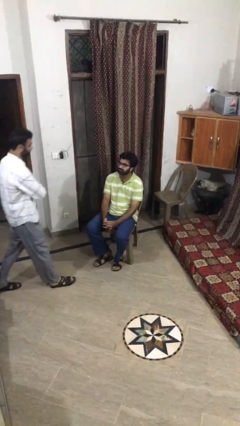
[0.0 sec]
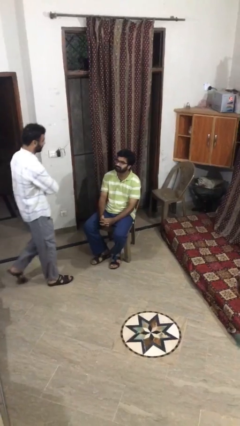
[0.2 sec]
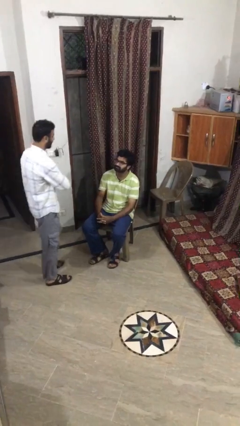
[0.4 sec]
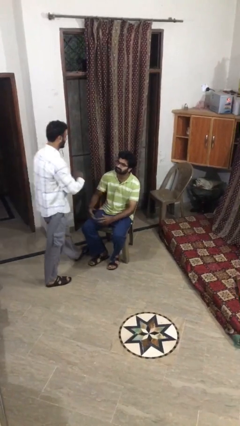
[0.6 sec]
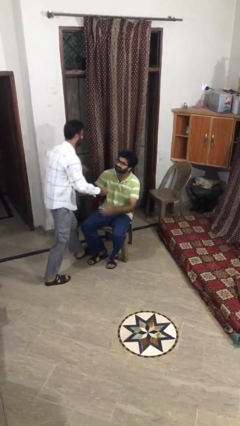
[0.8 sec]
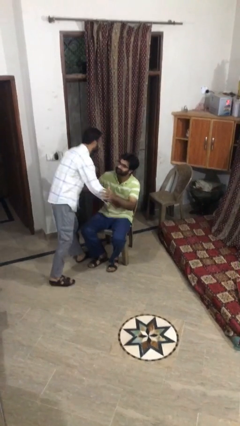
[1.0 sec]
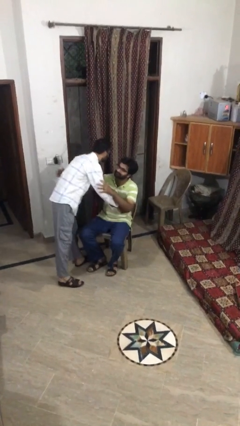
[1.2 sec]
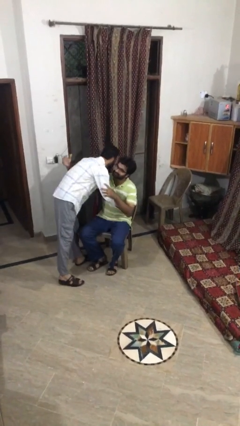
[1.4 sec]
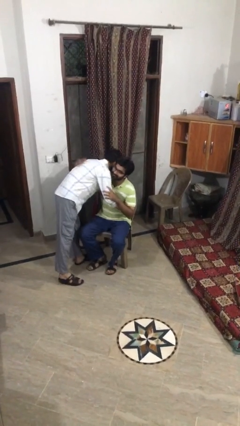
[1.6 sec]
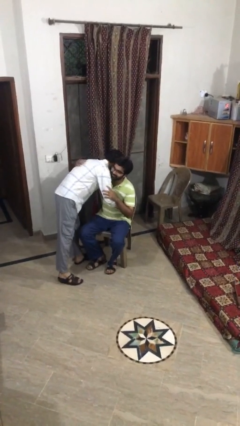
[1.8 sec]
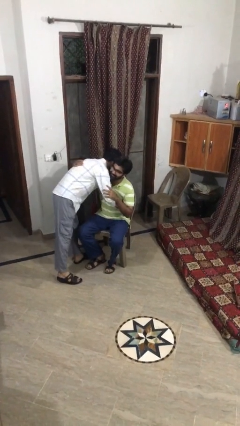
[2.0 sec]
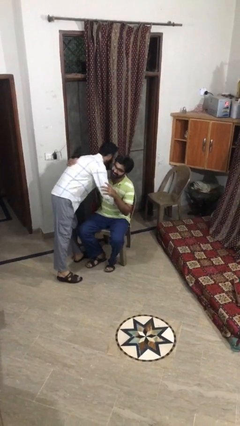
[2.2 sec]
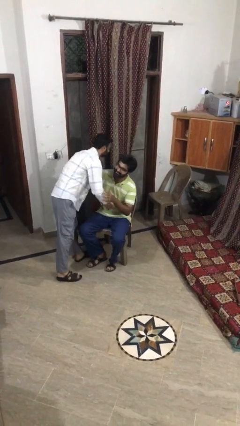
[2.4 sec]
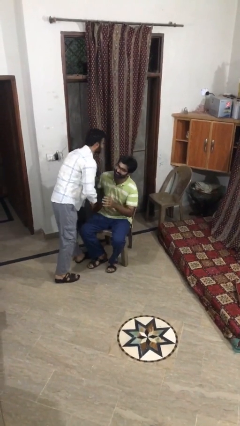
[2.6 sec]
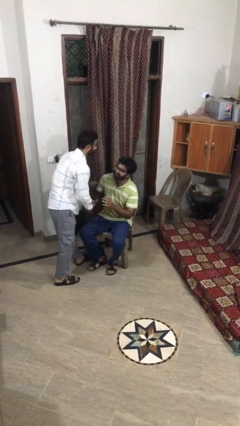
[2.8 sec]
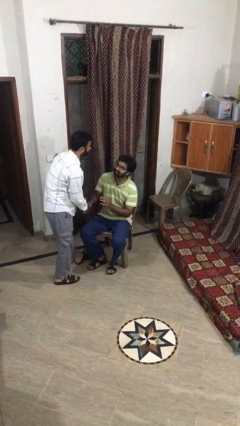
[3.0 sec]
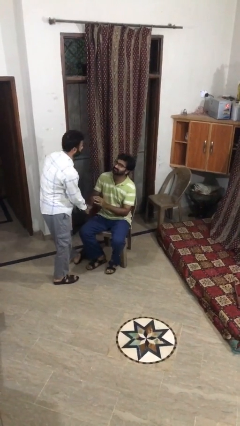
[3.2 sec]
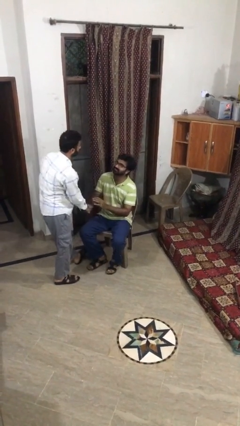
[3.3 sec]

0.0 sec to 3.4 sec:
person embraces person

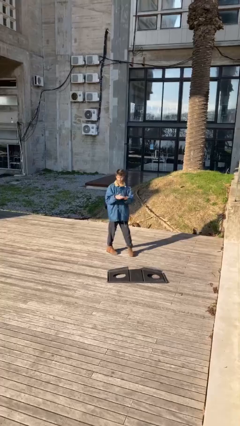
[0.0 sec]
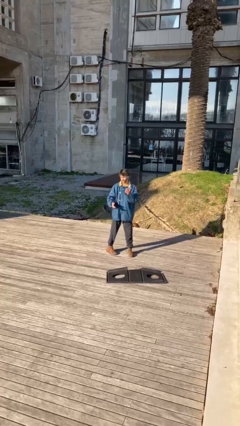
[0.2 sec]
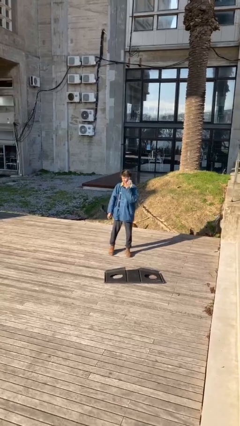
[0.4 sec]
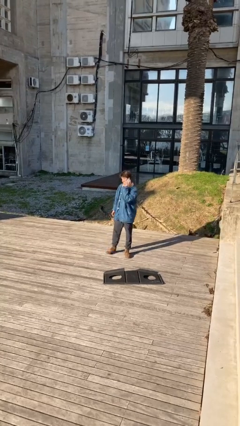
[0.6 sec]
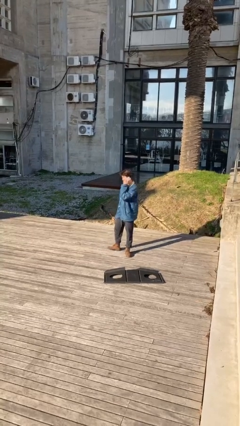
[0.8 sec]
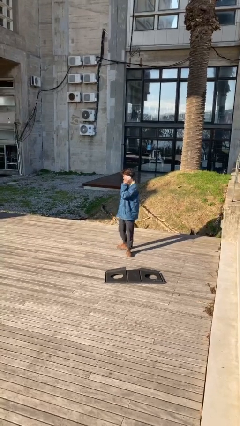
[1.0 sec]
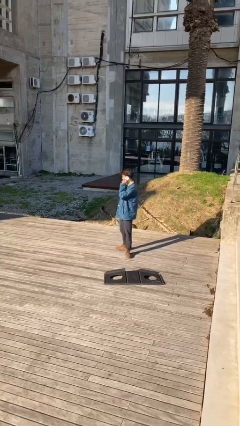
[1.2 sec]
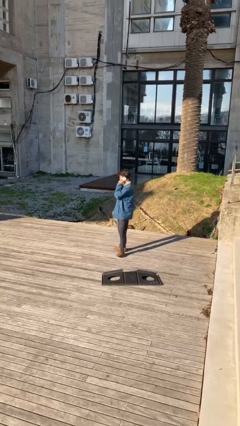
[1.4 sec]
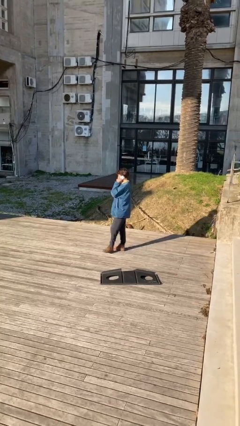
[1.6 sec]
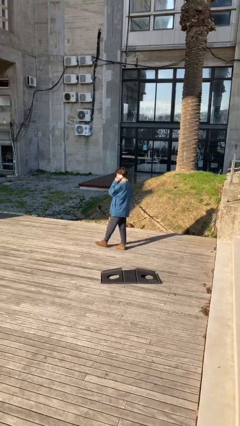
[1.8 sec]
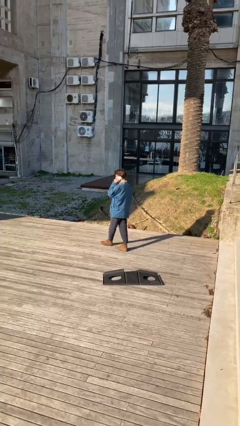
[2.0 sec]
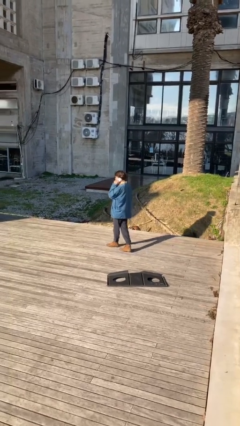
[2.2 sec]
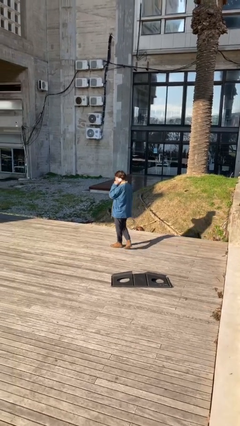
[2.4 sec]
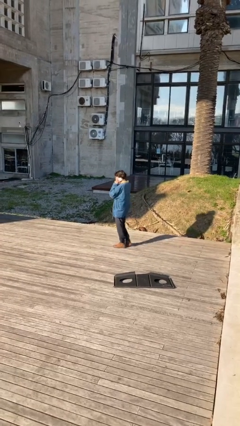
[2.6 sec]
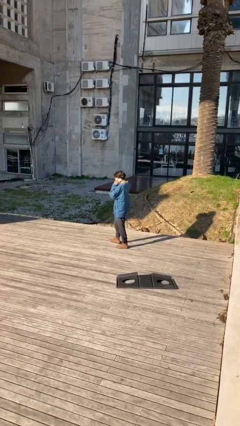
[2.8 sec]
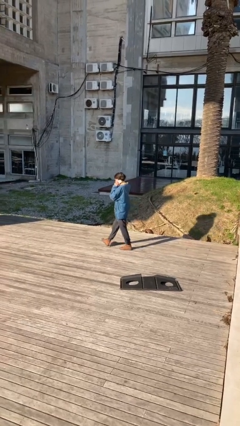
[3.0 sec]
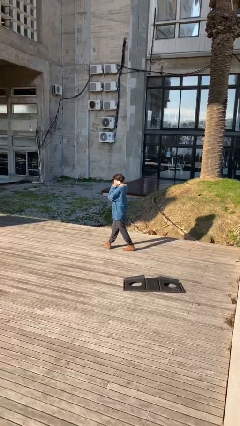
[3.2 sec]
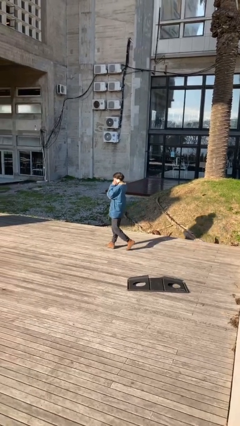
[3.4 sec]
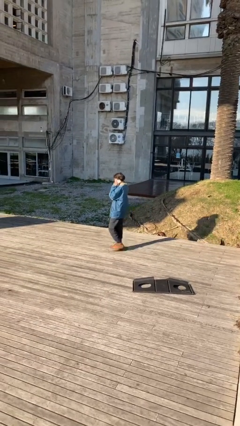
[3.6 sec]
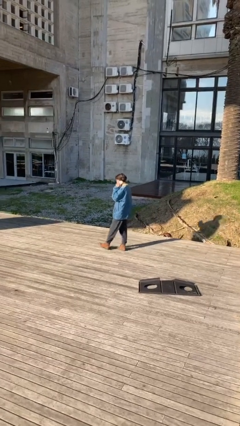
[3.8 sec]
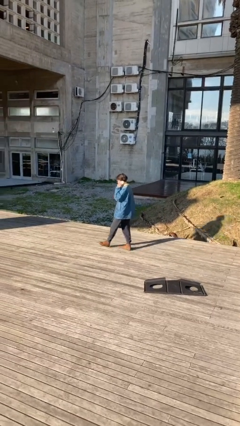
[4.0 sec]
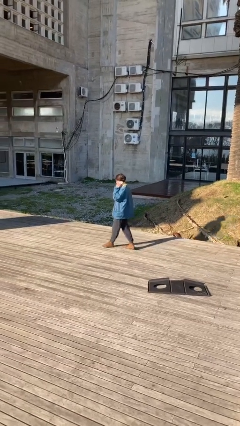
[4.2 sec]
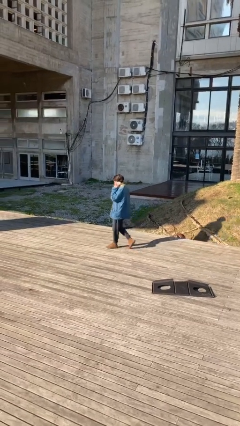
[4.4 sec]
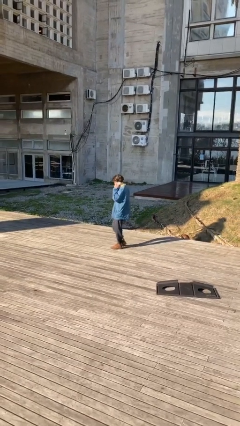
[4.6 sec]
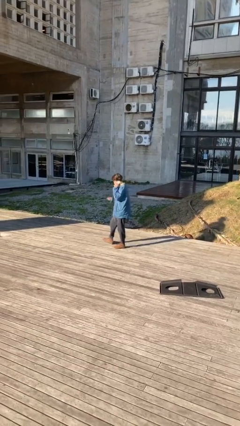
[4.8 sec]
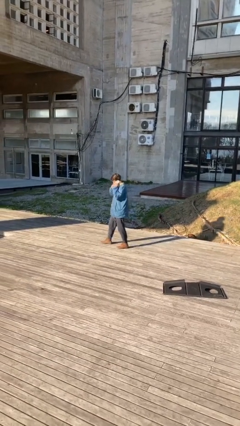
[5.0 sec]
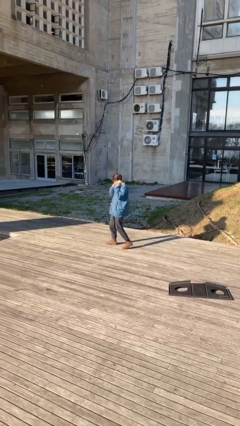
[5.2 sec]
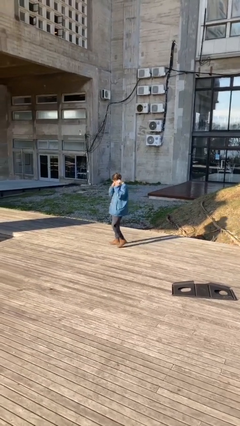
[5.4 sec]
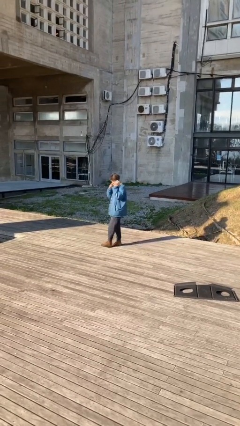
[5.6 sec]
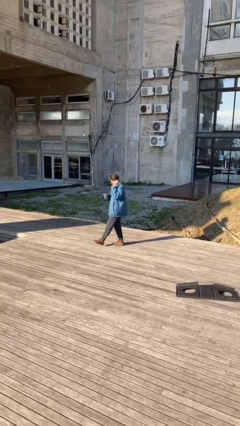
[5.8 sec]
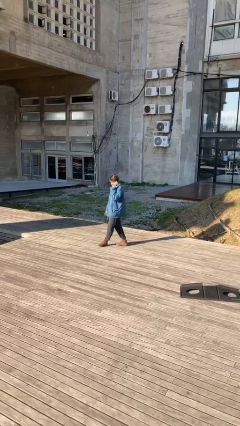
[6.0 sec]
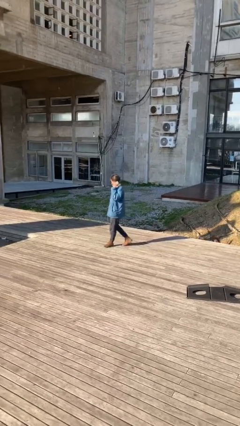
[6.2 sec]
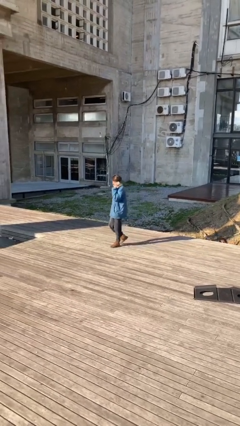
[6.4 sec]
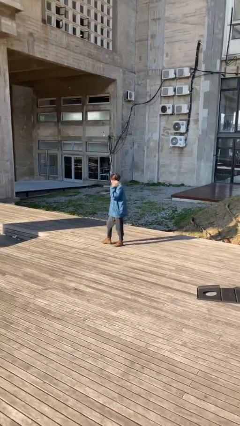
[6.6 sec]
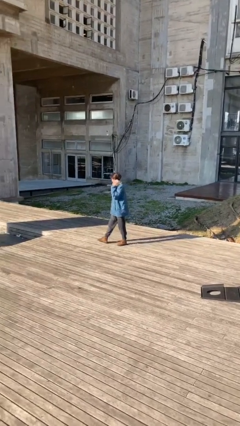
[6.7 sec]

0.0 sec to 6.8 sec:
person talks on phone

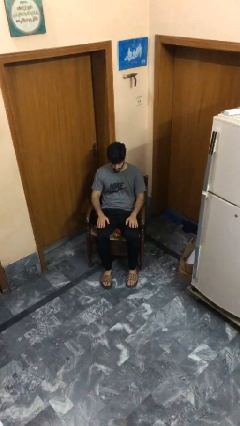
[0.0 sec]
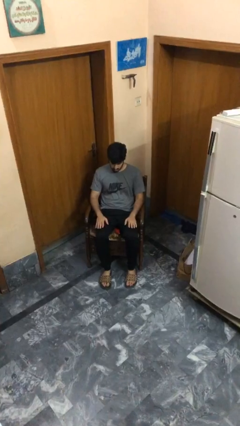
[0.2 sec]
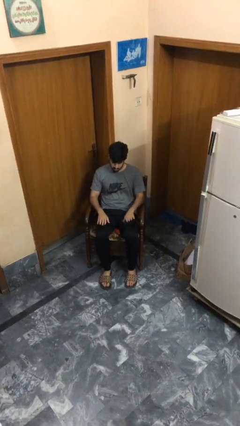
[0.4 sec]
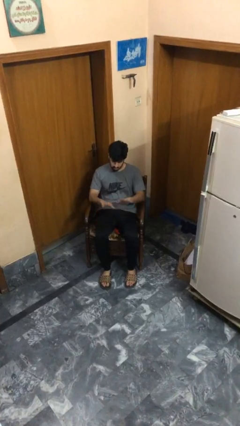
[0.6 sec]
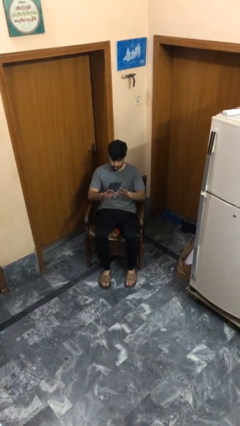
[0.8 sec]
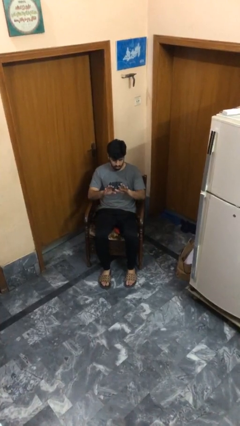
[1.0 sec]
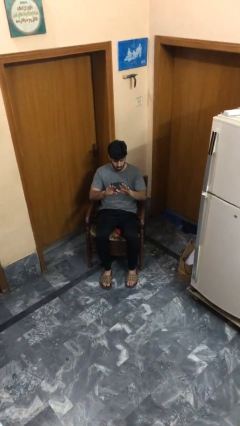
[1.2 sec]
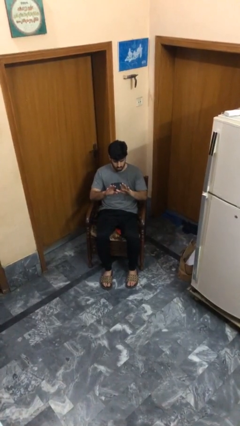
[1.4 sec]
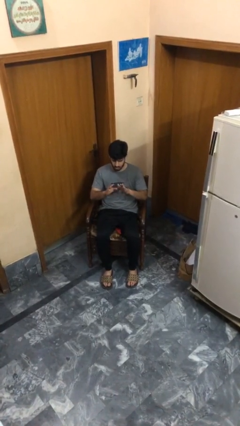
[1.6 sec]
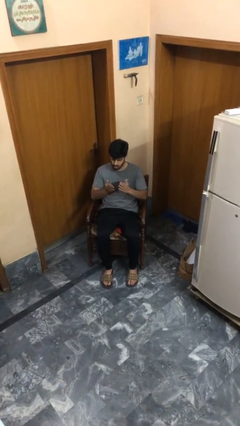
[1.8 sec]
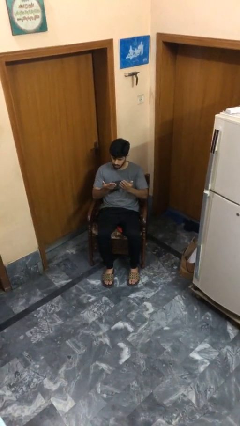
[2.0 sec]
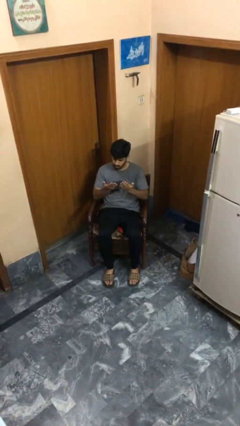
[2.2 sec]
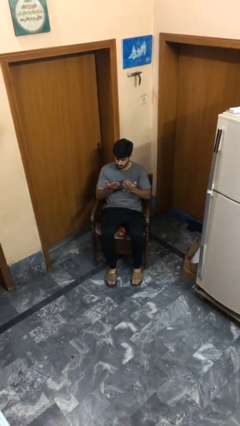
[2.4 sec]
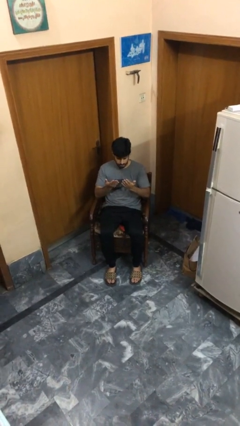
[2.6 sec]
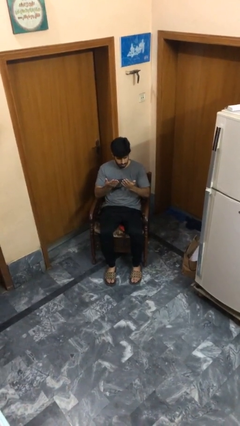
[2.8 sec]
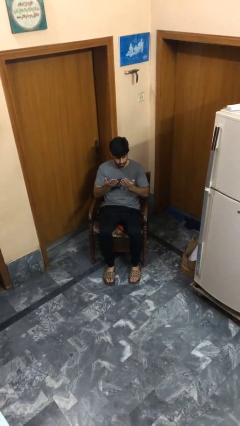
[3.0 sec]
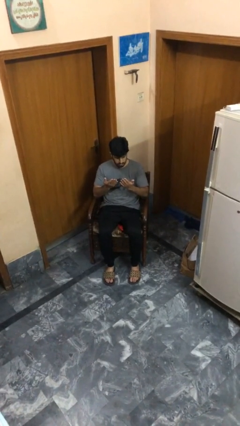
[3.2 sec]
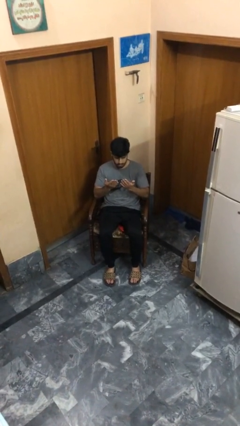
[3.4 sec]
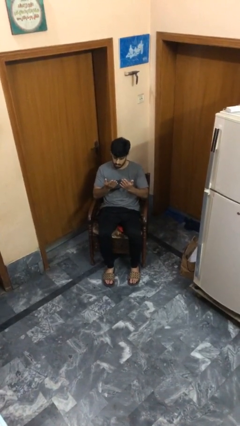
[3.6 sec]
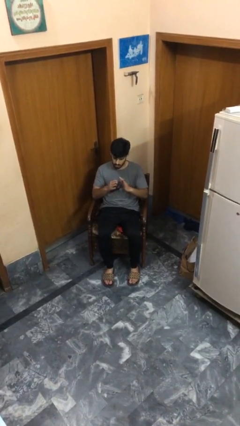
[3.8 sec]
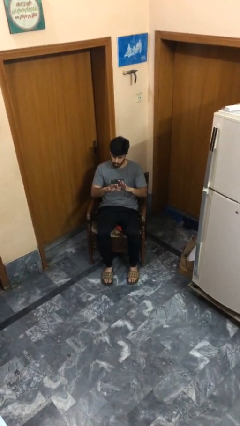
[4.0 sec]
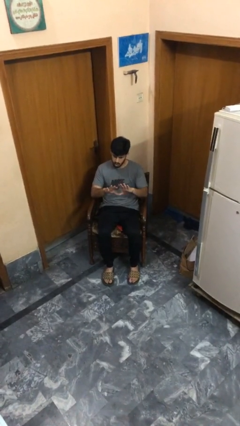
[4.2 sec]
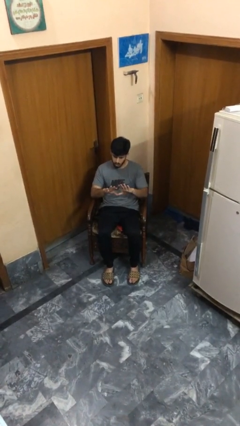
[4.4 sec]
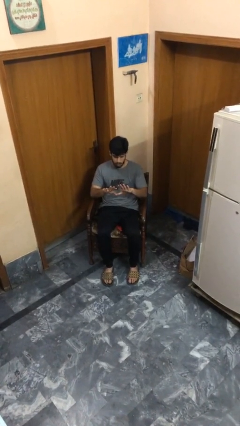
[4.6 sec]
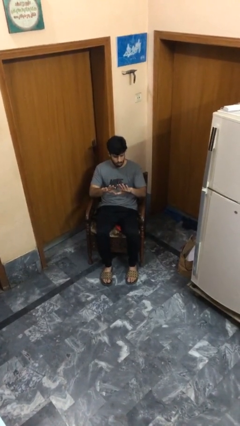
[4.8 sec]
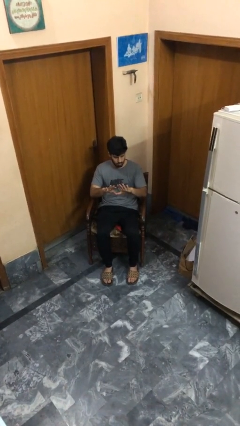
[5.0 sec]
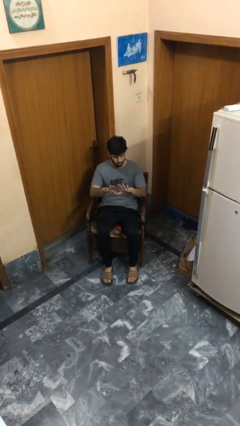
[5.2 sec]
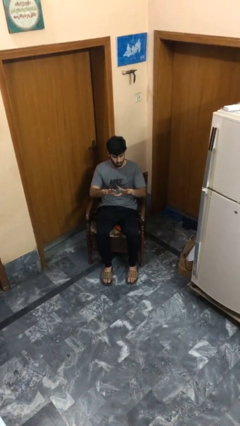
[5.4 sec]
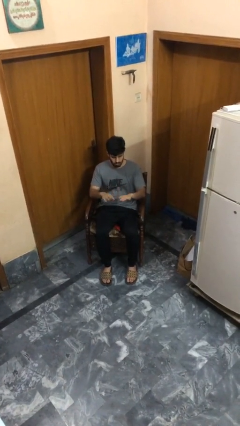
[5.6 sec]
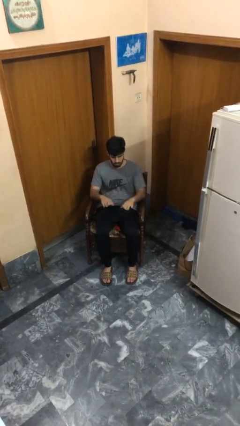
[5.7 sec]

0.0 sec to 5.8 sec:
person looks at hands in lap

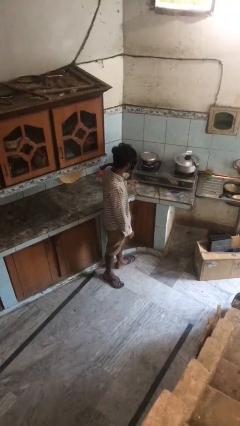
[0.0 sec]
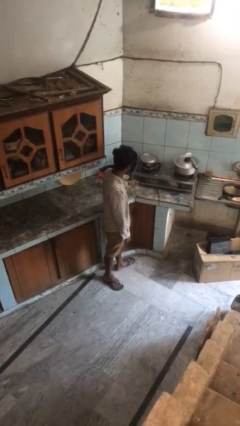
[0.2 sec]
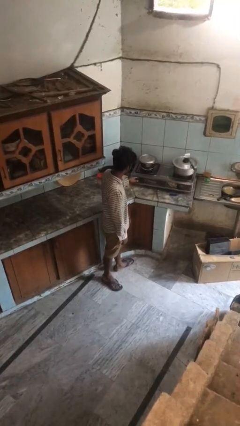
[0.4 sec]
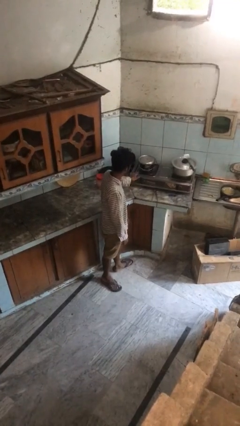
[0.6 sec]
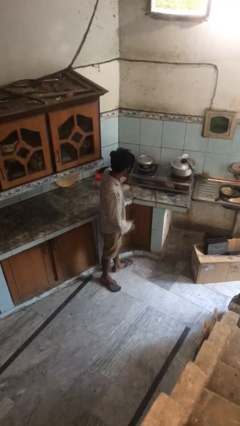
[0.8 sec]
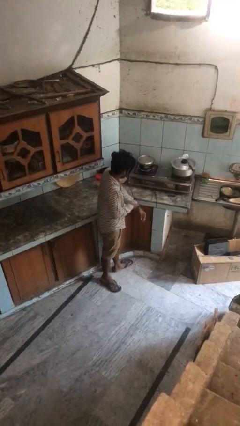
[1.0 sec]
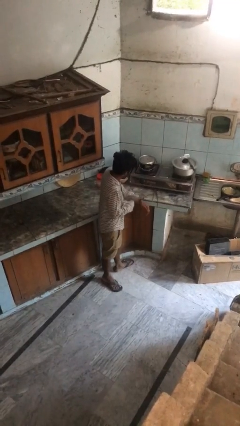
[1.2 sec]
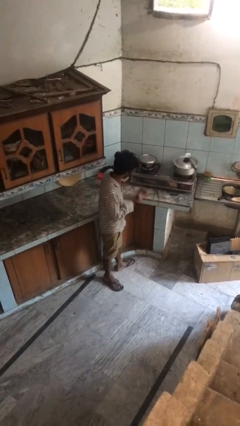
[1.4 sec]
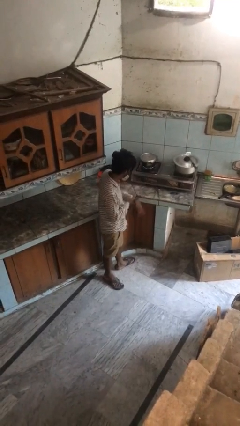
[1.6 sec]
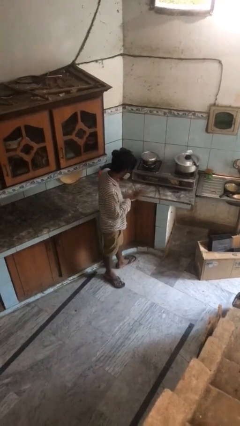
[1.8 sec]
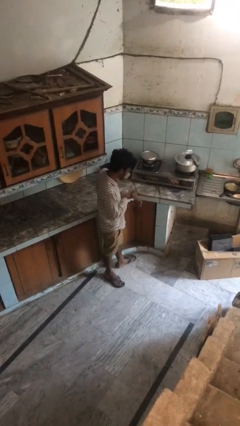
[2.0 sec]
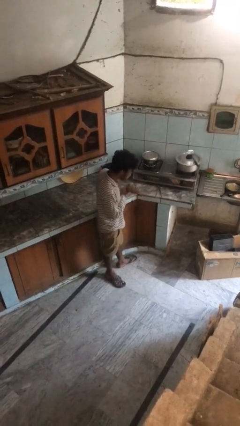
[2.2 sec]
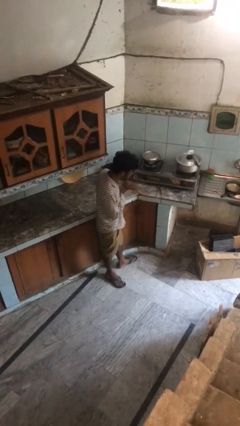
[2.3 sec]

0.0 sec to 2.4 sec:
person burns hand
